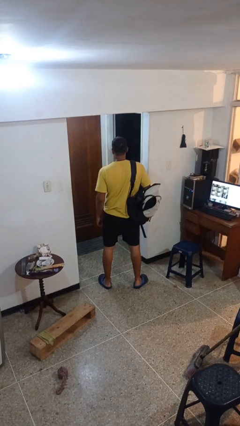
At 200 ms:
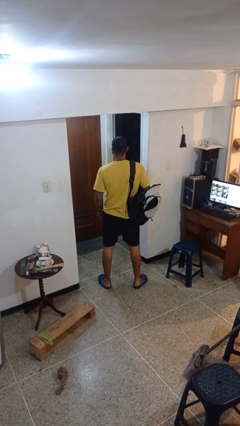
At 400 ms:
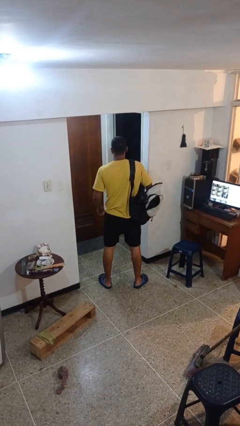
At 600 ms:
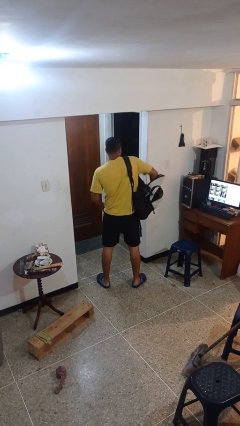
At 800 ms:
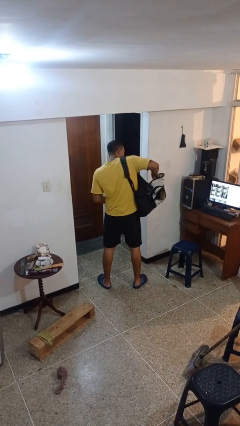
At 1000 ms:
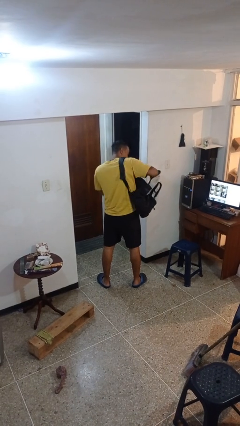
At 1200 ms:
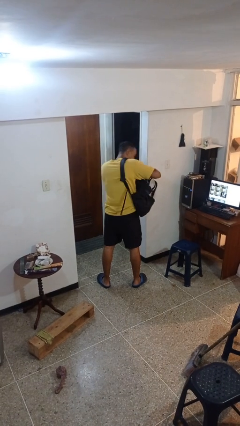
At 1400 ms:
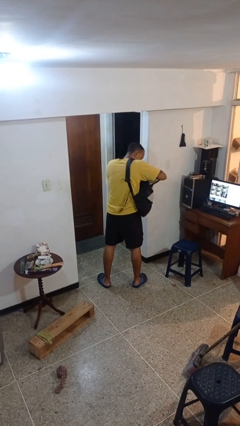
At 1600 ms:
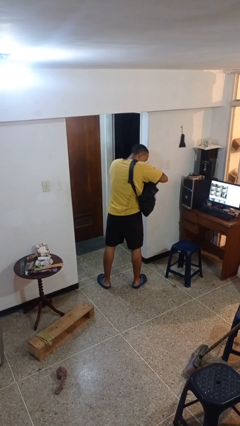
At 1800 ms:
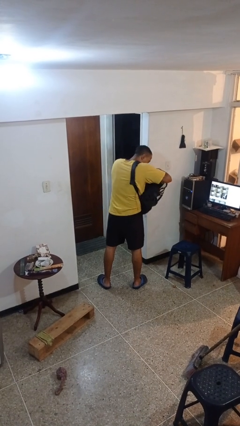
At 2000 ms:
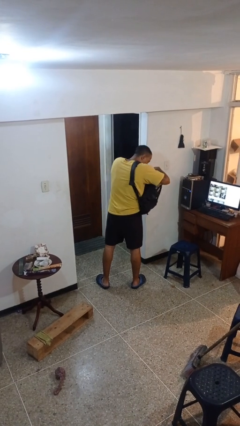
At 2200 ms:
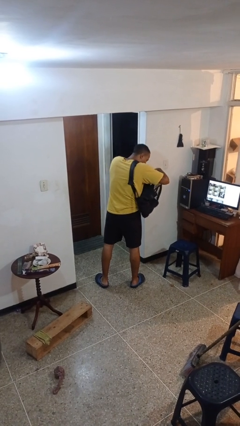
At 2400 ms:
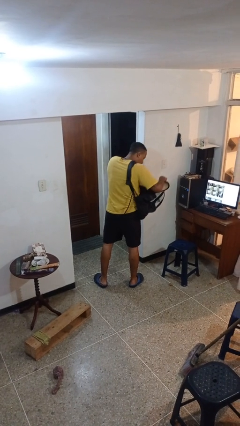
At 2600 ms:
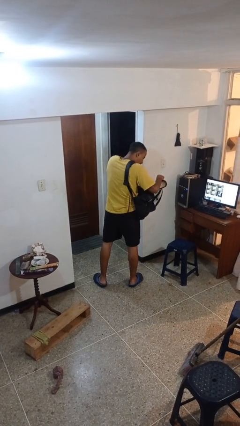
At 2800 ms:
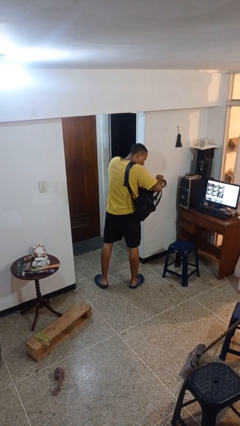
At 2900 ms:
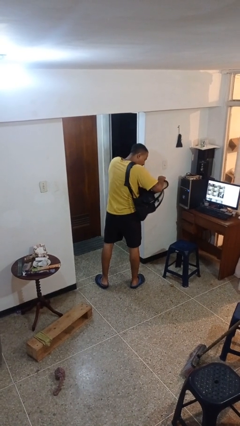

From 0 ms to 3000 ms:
person searches in backpack

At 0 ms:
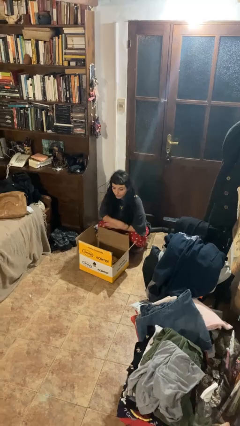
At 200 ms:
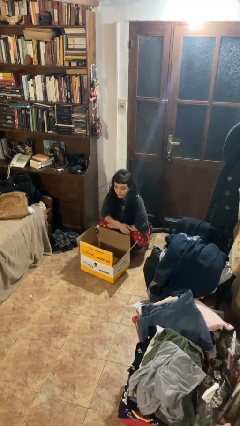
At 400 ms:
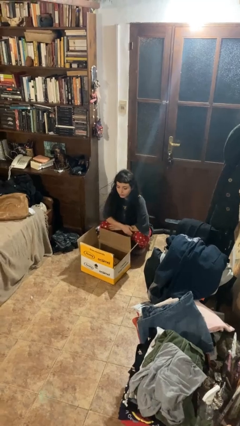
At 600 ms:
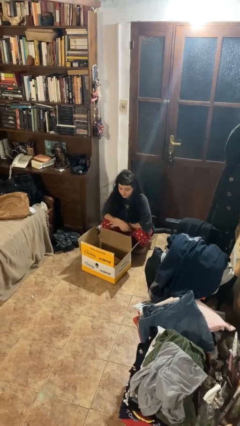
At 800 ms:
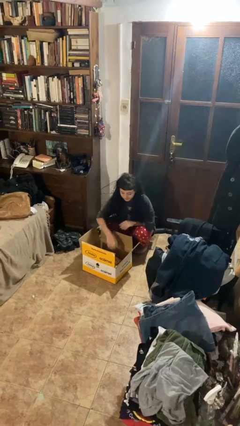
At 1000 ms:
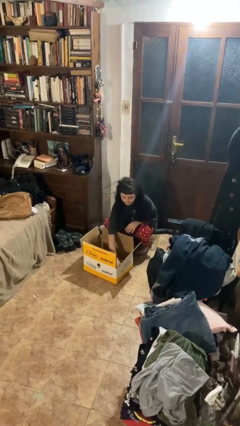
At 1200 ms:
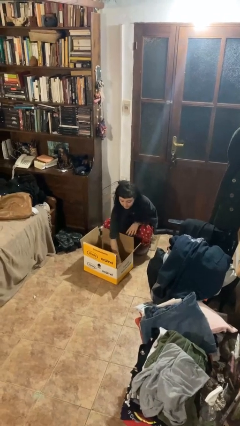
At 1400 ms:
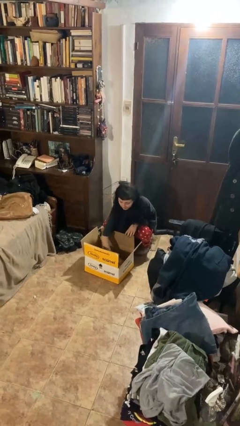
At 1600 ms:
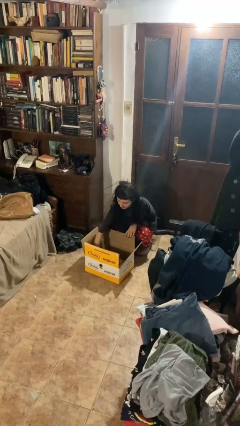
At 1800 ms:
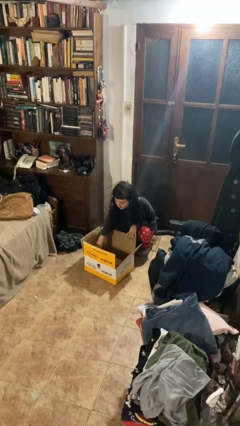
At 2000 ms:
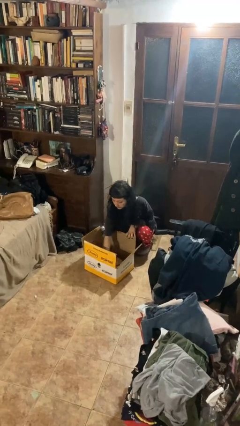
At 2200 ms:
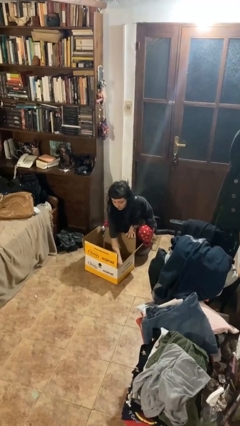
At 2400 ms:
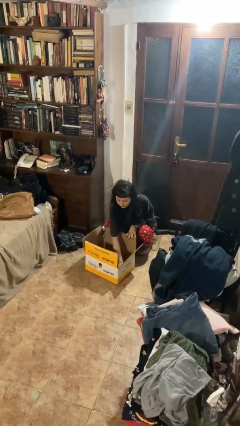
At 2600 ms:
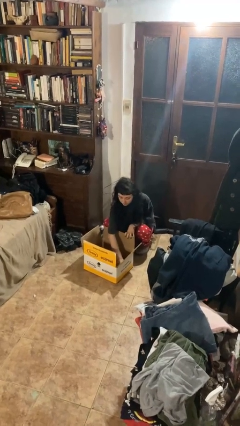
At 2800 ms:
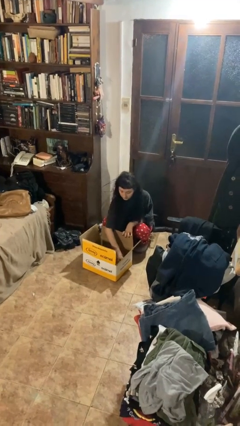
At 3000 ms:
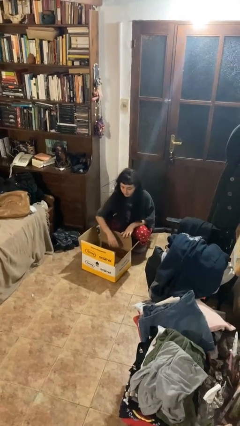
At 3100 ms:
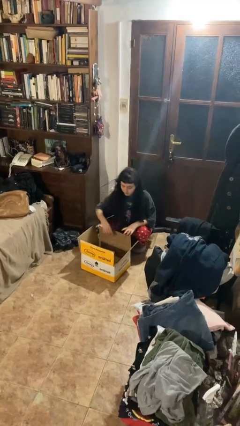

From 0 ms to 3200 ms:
person searches in box

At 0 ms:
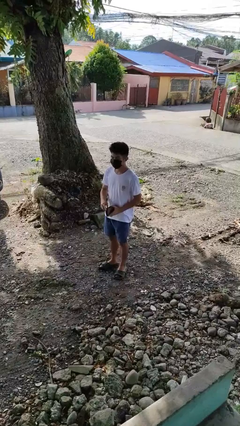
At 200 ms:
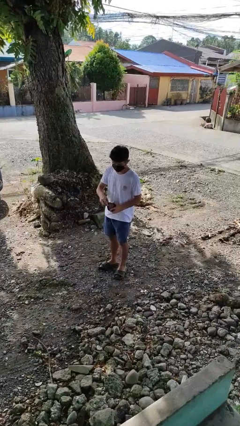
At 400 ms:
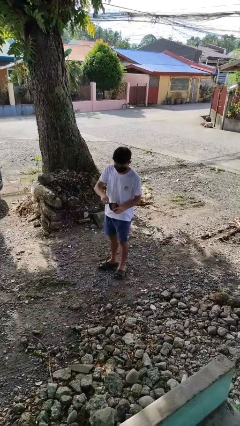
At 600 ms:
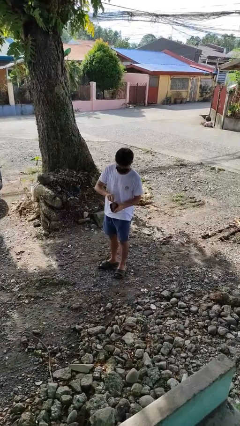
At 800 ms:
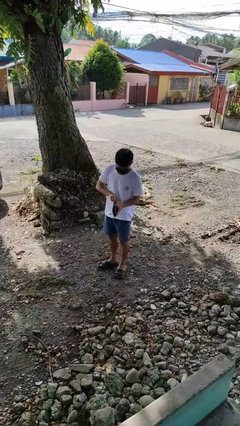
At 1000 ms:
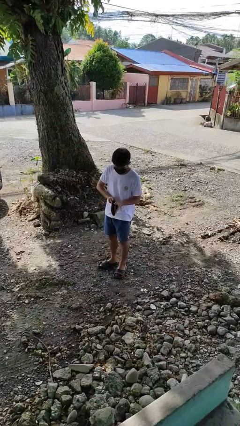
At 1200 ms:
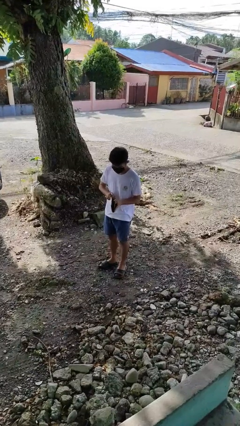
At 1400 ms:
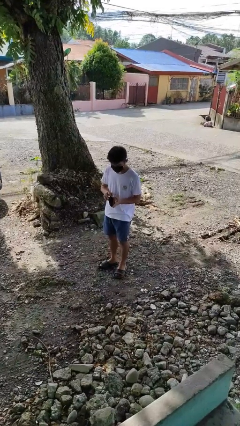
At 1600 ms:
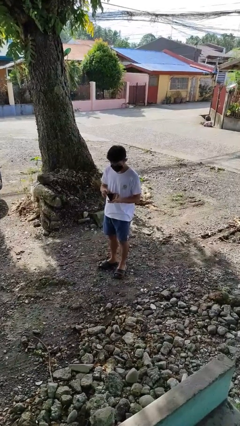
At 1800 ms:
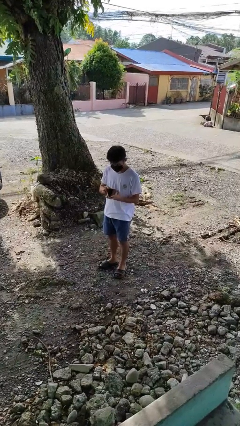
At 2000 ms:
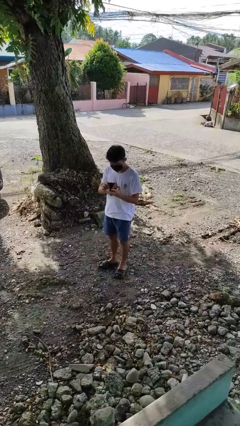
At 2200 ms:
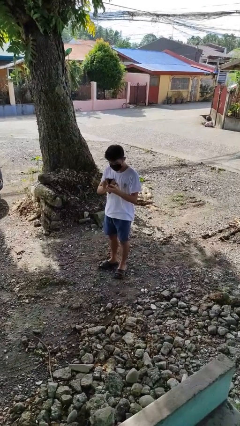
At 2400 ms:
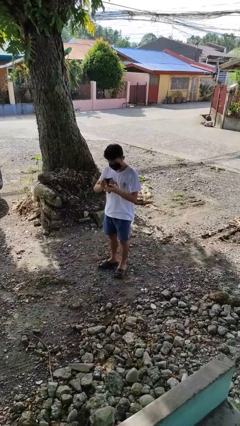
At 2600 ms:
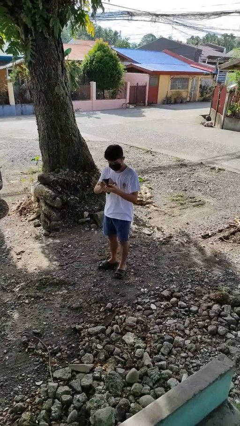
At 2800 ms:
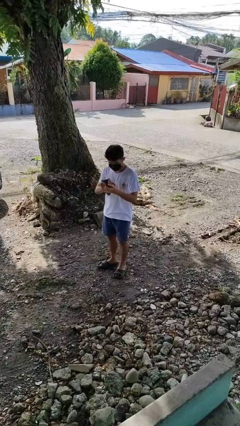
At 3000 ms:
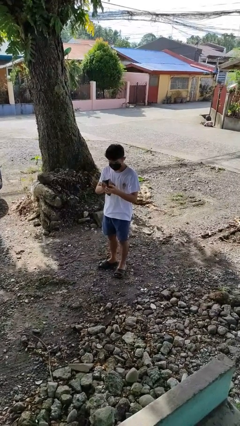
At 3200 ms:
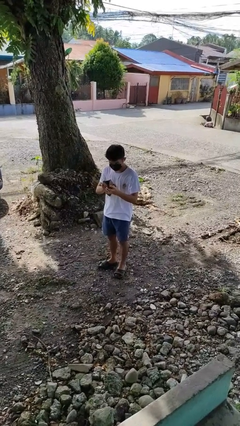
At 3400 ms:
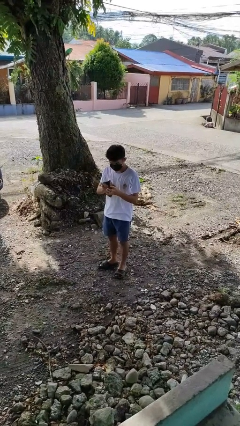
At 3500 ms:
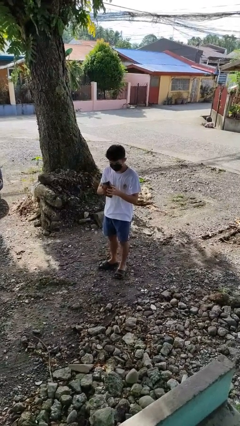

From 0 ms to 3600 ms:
person searches in purse

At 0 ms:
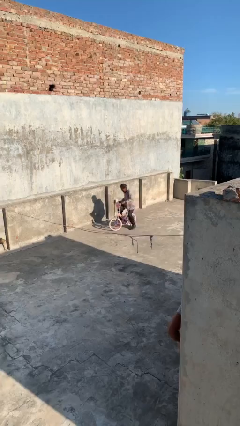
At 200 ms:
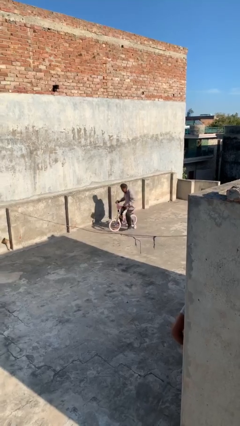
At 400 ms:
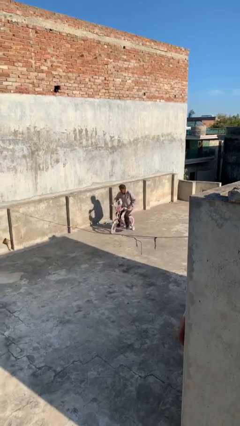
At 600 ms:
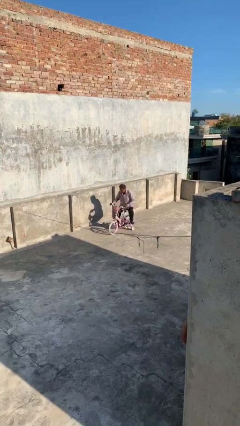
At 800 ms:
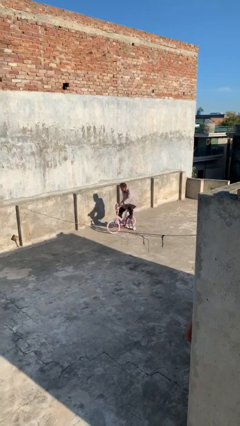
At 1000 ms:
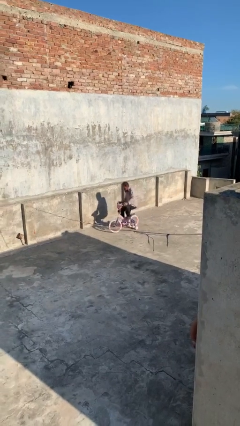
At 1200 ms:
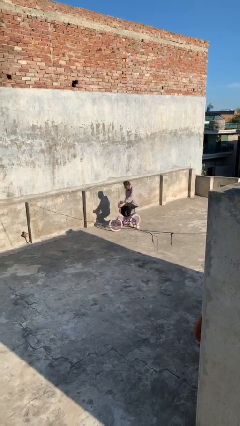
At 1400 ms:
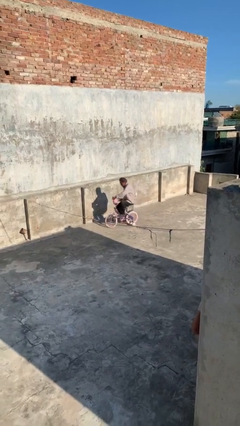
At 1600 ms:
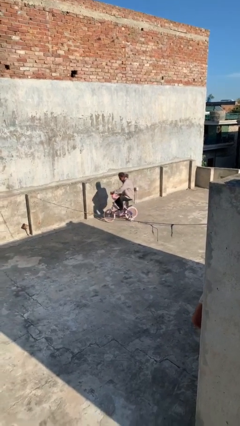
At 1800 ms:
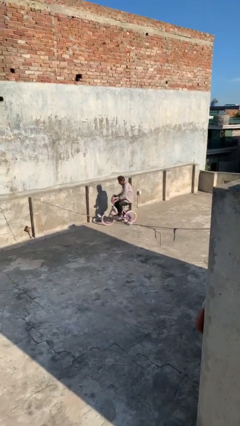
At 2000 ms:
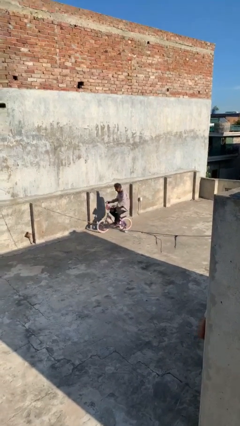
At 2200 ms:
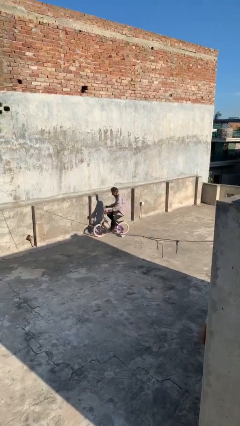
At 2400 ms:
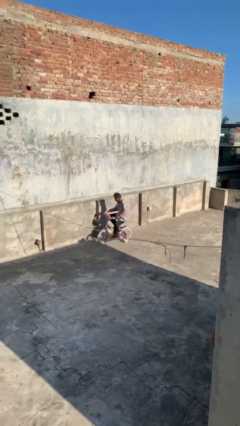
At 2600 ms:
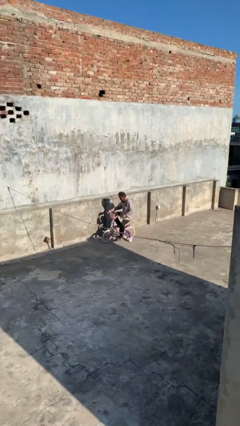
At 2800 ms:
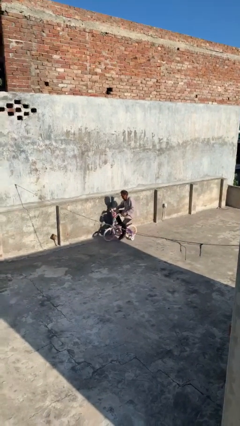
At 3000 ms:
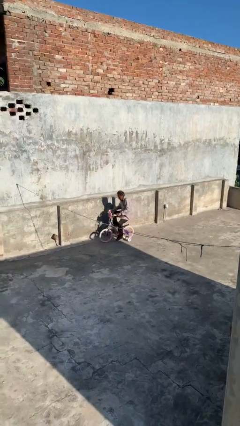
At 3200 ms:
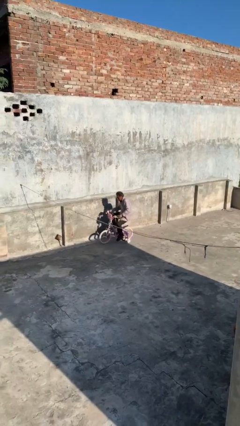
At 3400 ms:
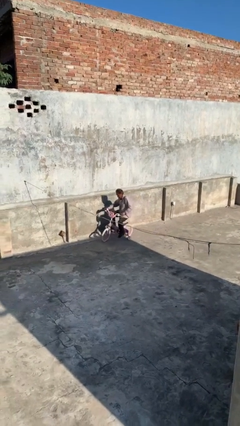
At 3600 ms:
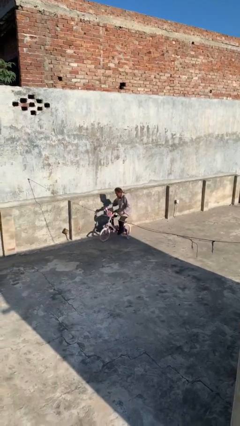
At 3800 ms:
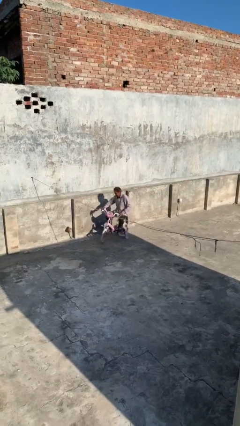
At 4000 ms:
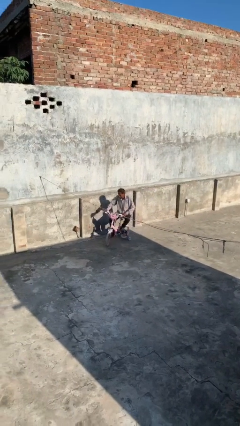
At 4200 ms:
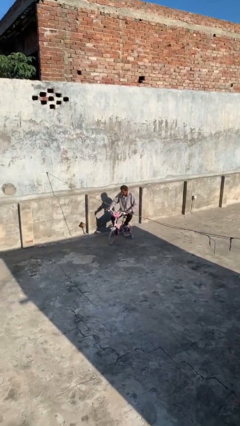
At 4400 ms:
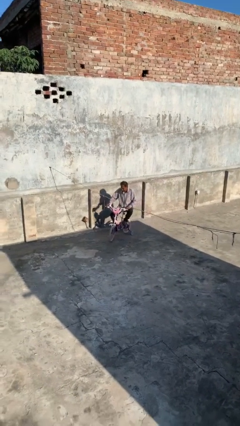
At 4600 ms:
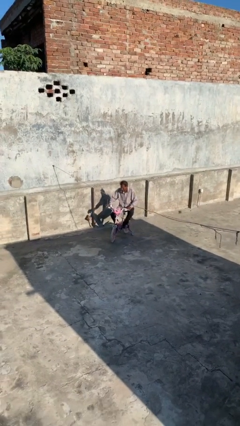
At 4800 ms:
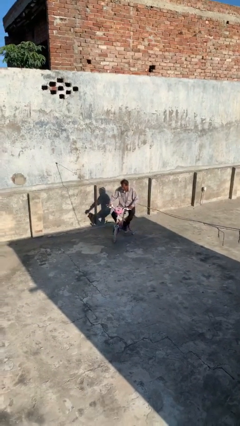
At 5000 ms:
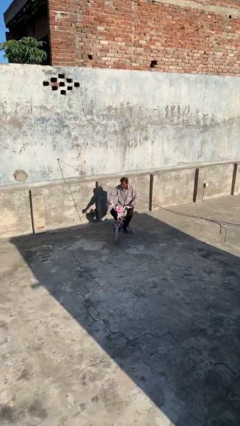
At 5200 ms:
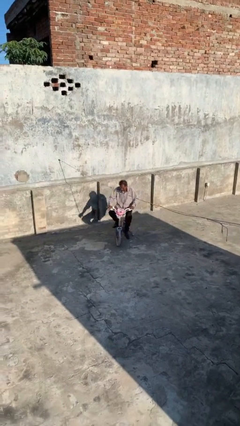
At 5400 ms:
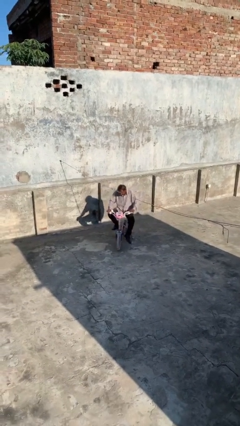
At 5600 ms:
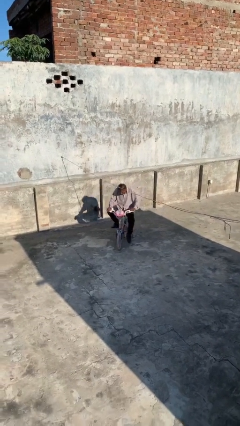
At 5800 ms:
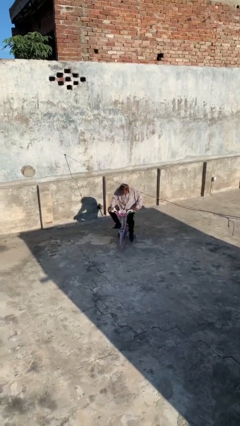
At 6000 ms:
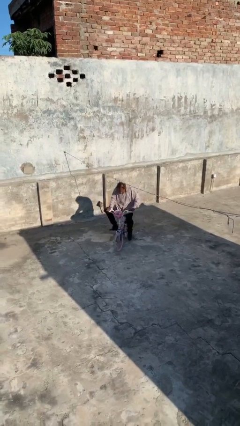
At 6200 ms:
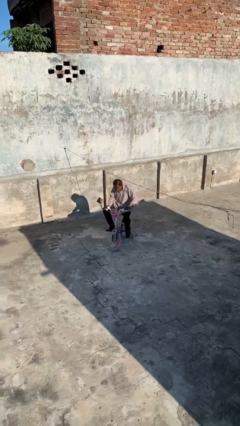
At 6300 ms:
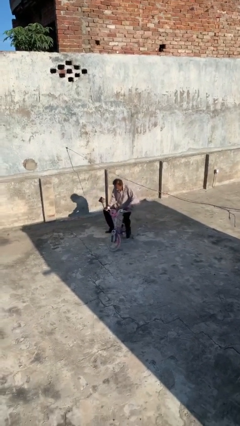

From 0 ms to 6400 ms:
person rides bicycle

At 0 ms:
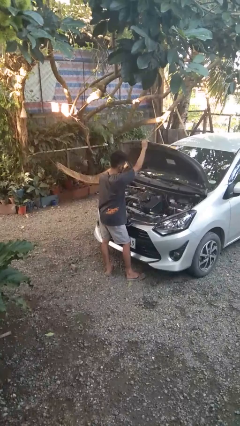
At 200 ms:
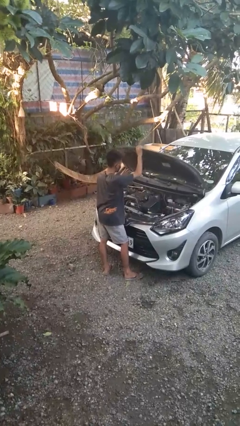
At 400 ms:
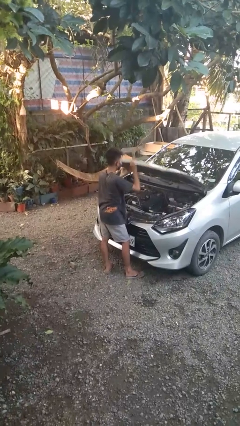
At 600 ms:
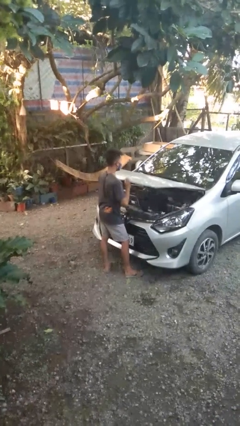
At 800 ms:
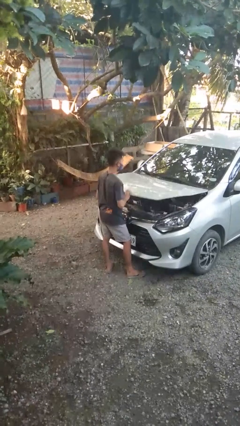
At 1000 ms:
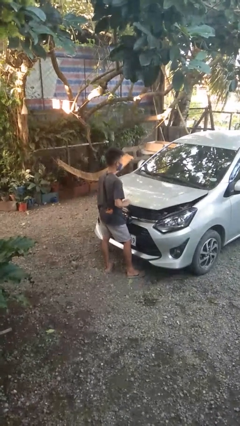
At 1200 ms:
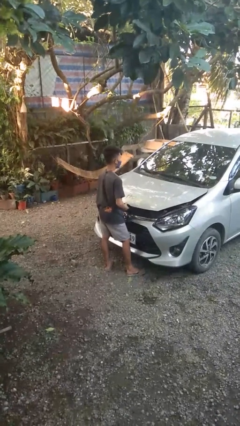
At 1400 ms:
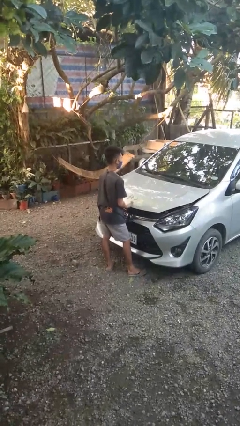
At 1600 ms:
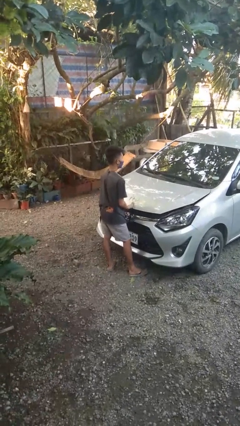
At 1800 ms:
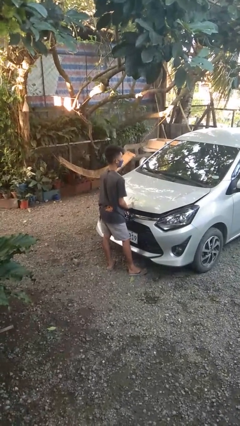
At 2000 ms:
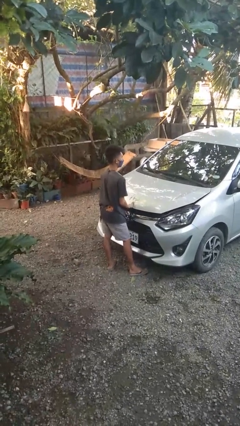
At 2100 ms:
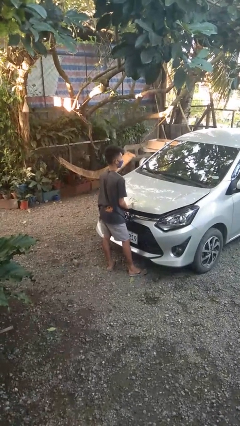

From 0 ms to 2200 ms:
person closes car hood
